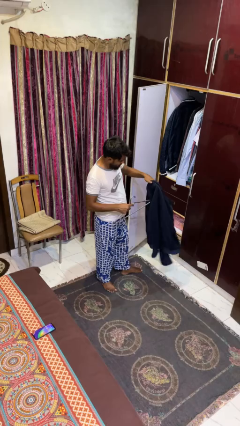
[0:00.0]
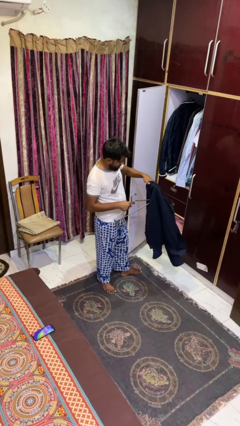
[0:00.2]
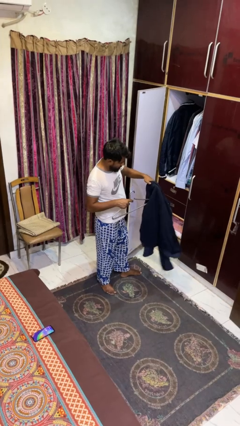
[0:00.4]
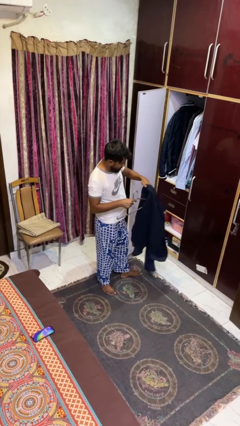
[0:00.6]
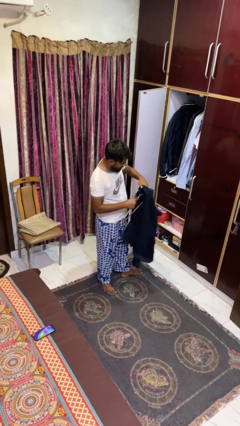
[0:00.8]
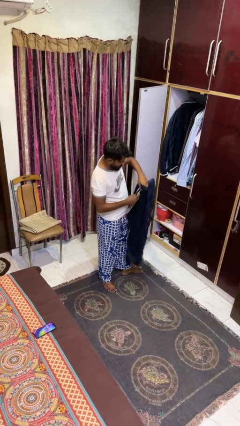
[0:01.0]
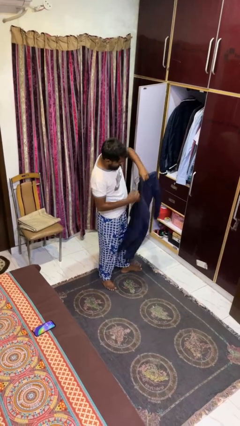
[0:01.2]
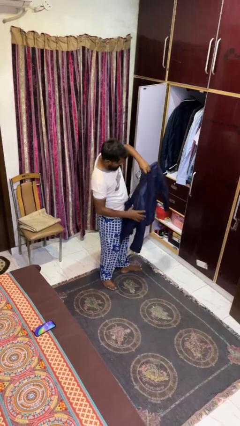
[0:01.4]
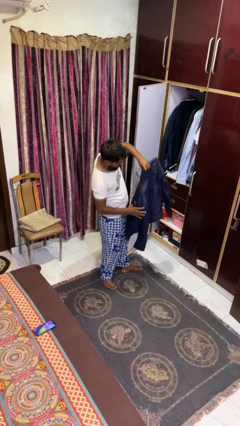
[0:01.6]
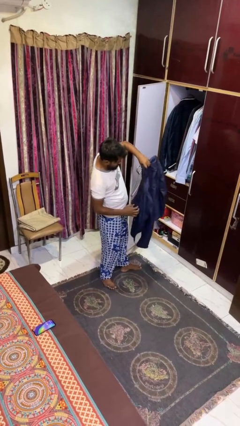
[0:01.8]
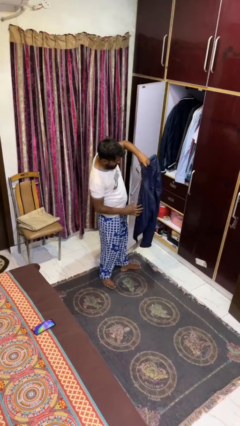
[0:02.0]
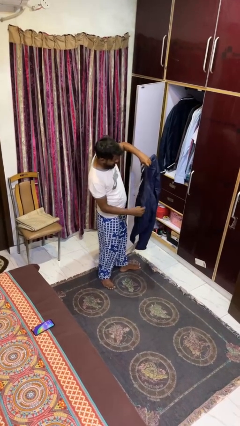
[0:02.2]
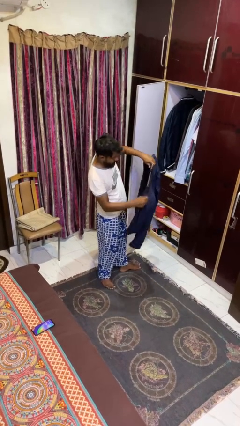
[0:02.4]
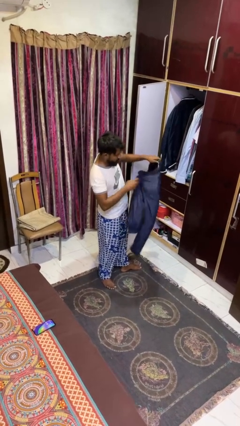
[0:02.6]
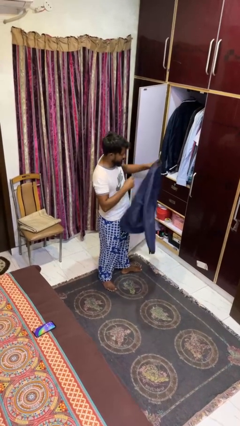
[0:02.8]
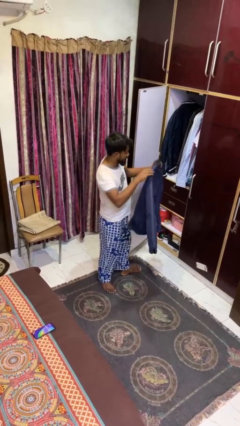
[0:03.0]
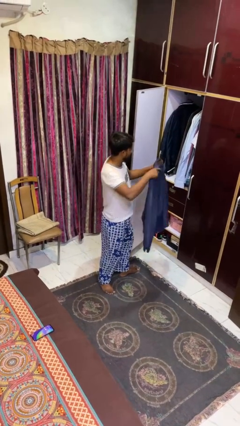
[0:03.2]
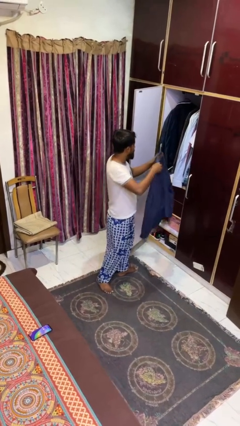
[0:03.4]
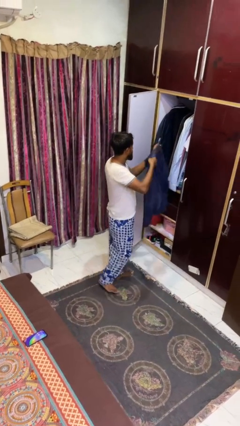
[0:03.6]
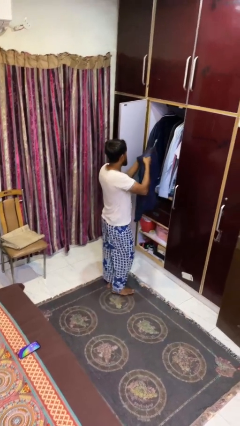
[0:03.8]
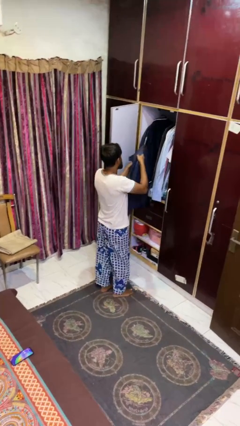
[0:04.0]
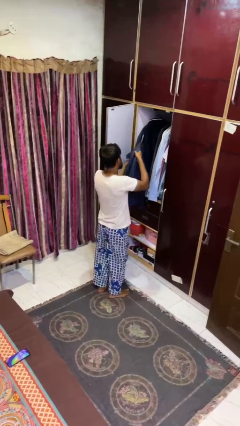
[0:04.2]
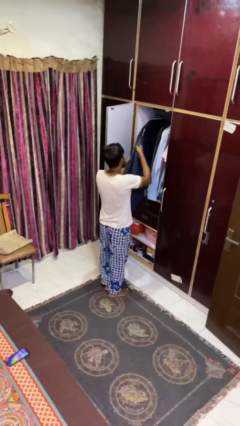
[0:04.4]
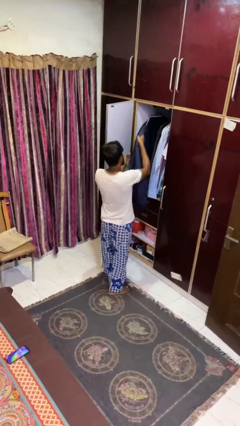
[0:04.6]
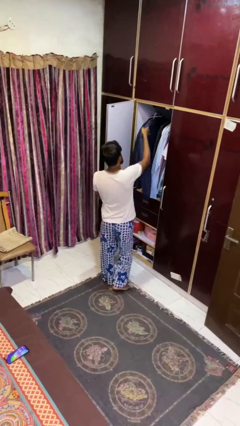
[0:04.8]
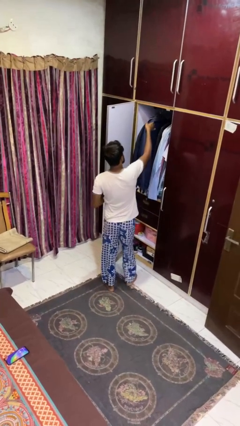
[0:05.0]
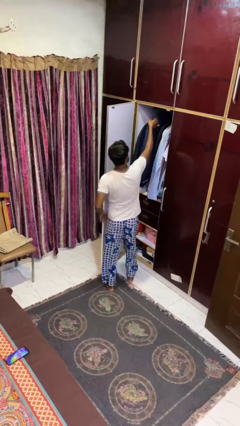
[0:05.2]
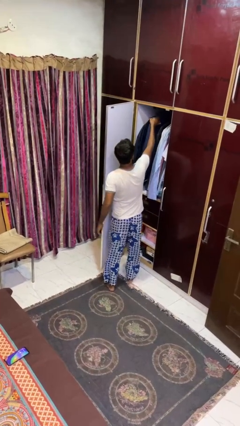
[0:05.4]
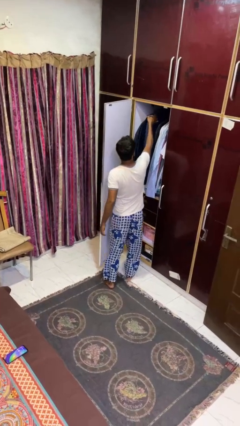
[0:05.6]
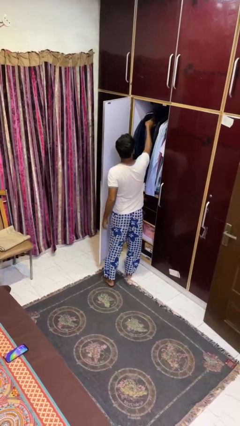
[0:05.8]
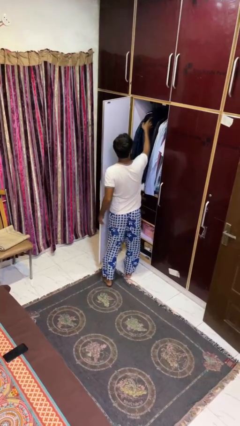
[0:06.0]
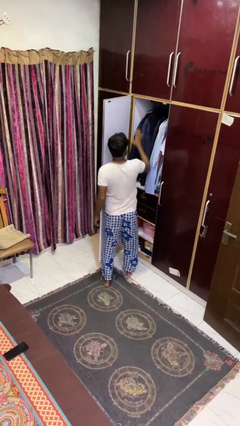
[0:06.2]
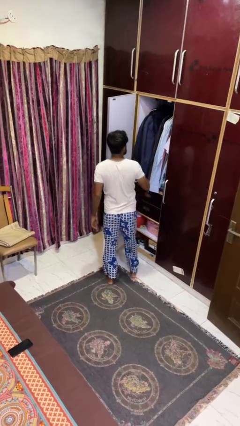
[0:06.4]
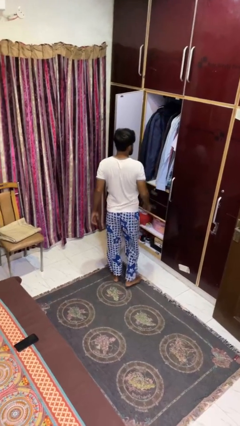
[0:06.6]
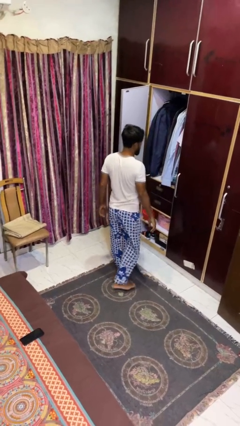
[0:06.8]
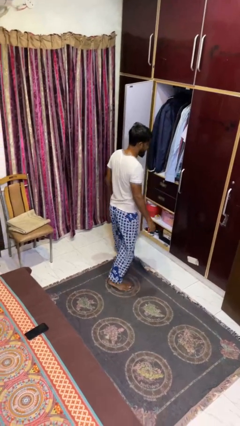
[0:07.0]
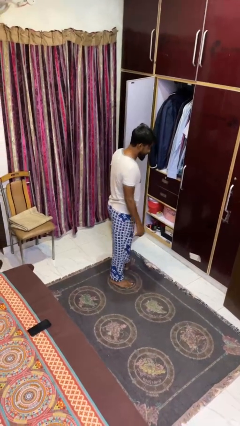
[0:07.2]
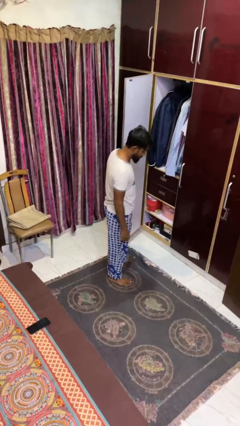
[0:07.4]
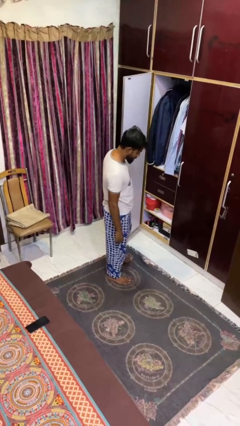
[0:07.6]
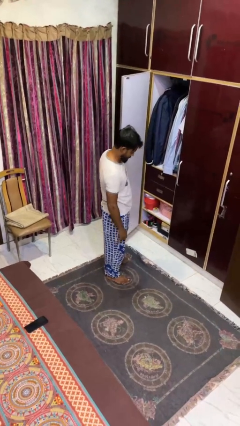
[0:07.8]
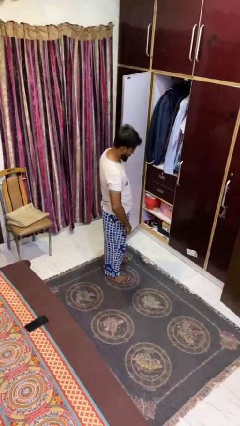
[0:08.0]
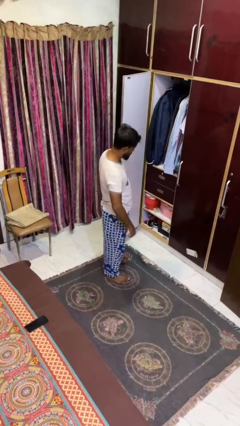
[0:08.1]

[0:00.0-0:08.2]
person puts clothes into closet

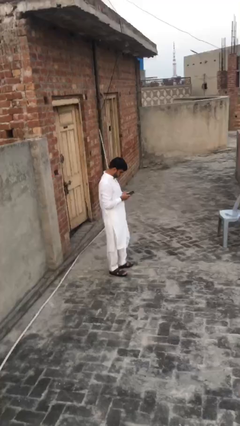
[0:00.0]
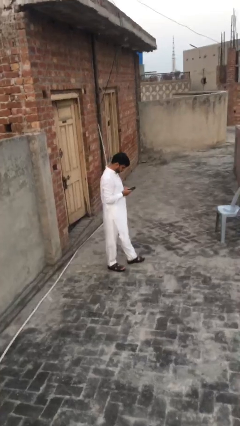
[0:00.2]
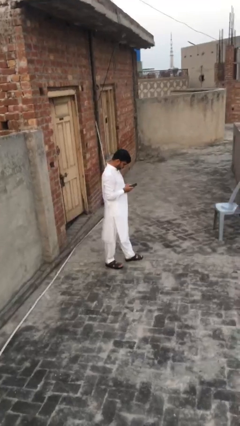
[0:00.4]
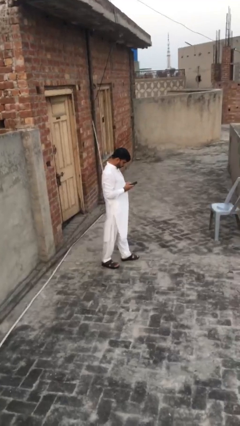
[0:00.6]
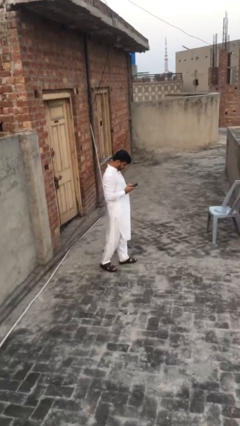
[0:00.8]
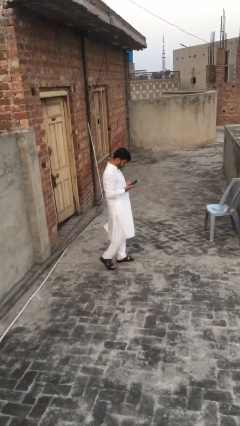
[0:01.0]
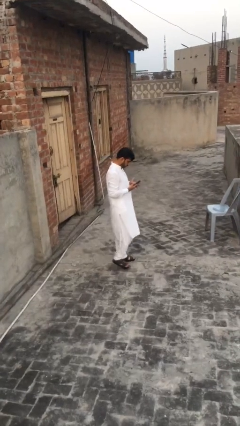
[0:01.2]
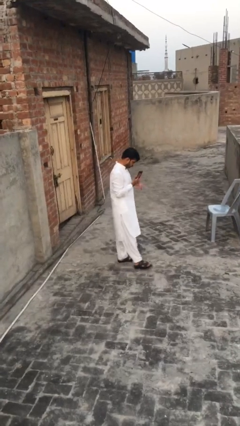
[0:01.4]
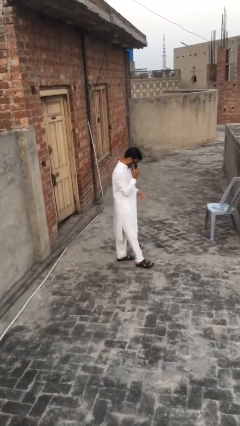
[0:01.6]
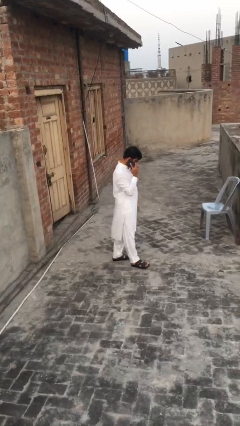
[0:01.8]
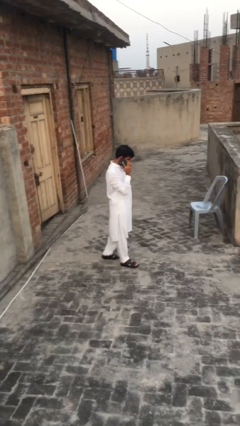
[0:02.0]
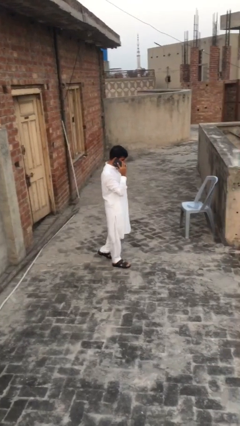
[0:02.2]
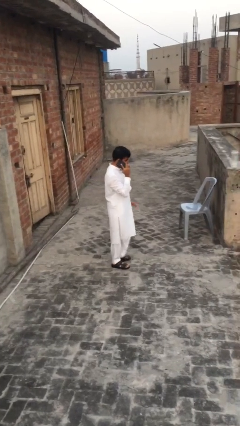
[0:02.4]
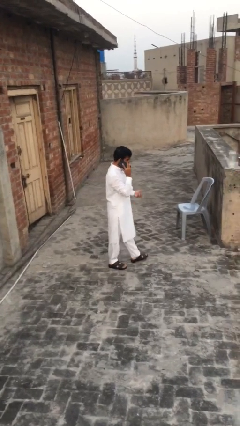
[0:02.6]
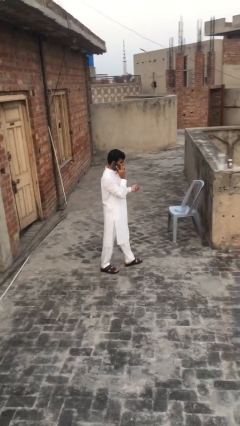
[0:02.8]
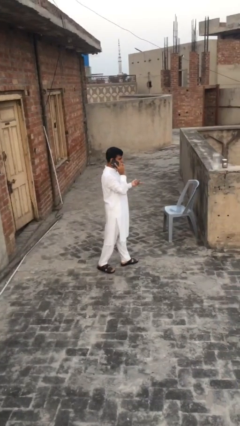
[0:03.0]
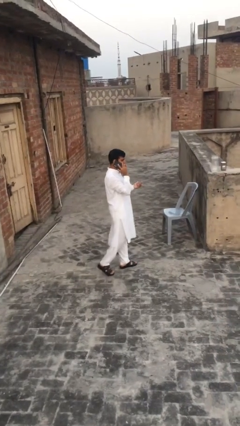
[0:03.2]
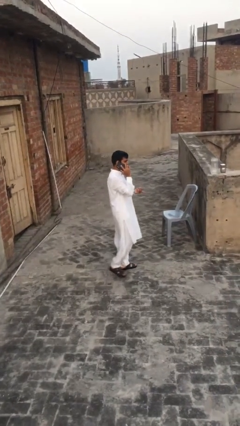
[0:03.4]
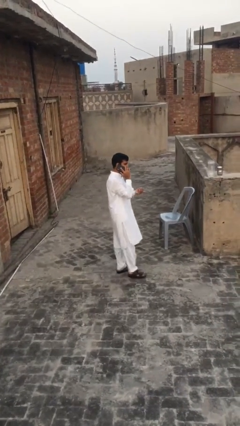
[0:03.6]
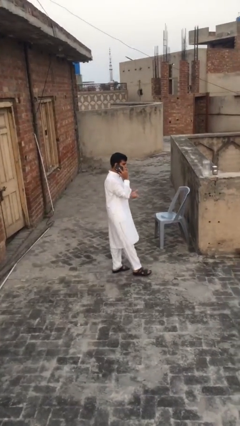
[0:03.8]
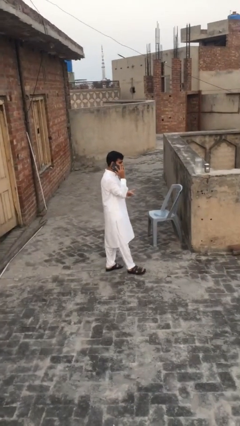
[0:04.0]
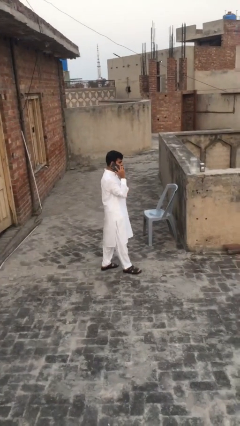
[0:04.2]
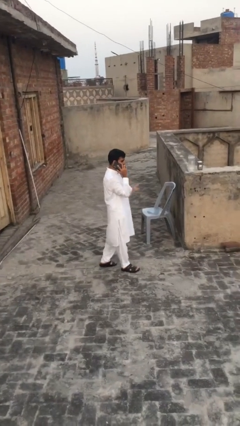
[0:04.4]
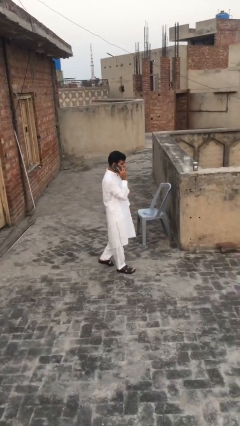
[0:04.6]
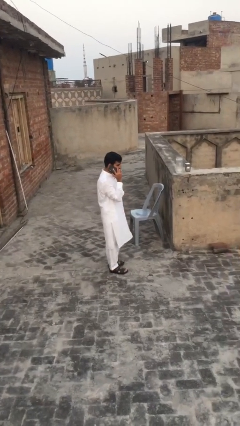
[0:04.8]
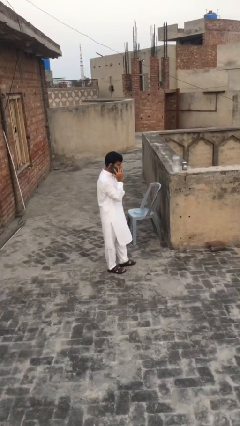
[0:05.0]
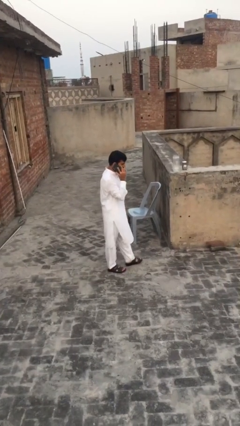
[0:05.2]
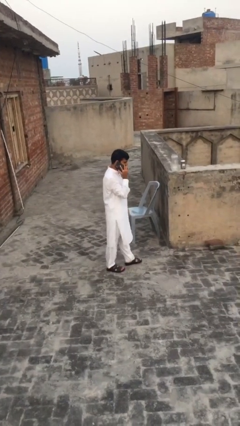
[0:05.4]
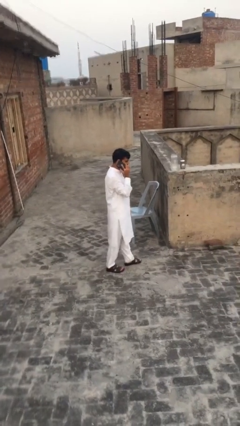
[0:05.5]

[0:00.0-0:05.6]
person talks on phone

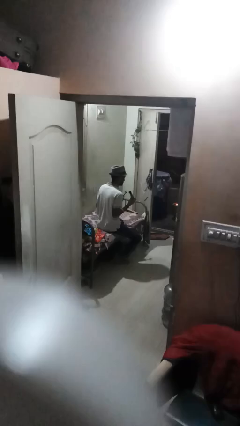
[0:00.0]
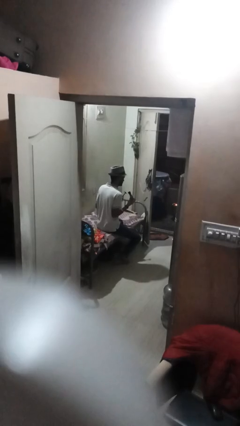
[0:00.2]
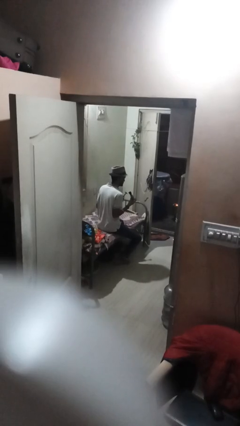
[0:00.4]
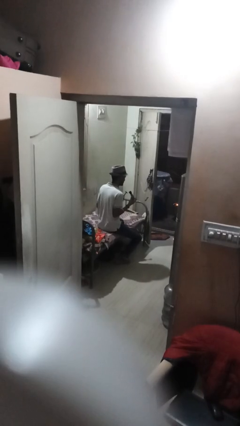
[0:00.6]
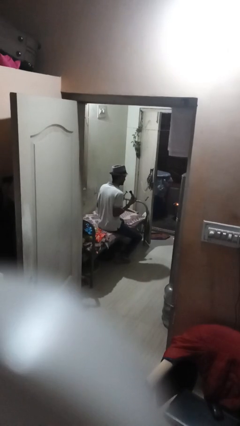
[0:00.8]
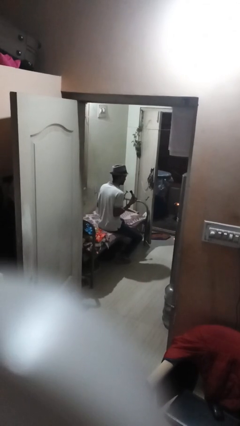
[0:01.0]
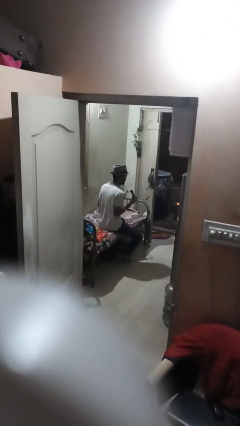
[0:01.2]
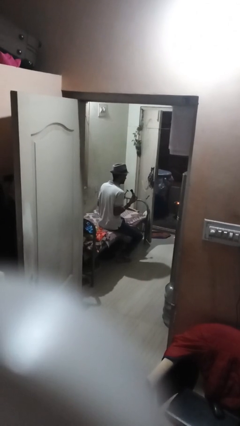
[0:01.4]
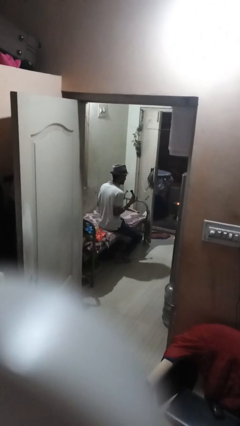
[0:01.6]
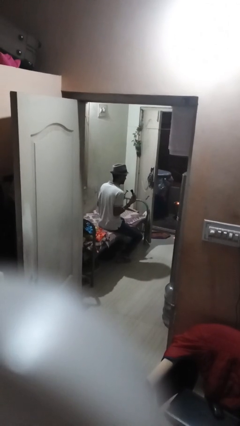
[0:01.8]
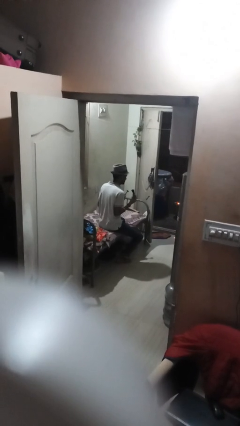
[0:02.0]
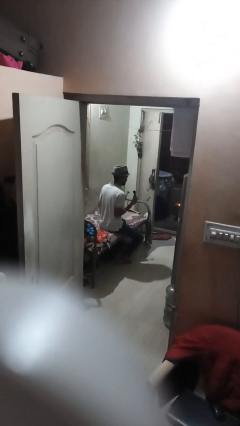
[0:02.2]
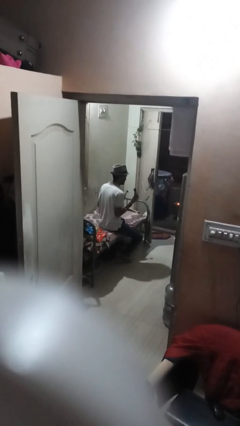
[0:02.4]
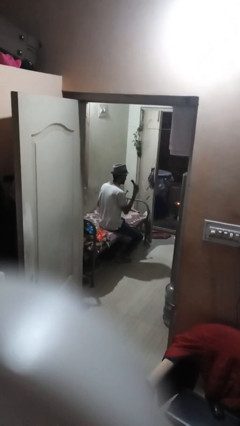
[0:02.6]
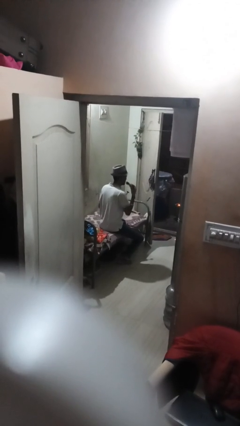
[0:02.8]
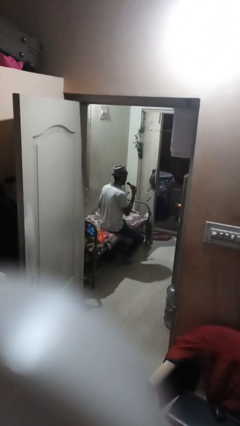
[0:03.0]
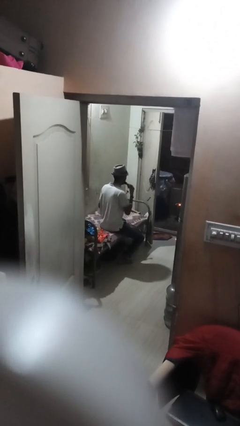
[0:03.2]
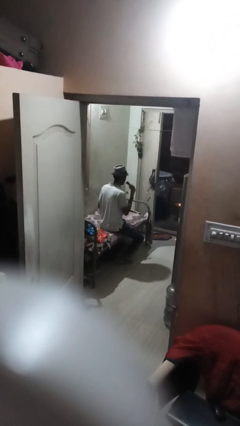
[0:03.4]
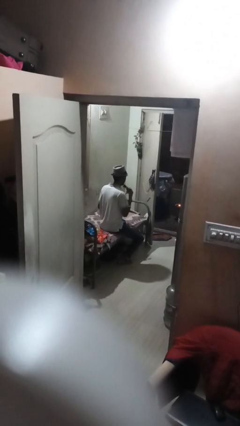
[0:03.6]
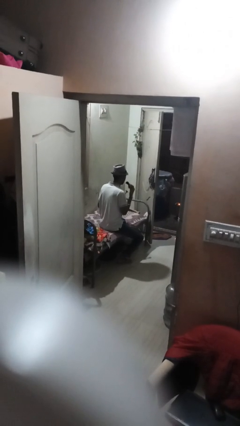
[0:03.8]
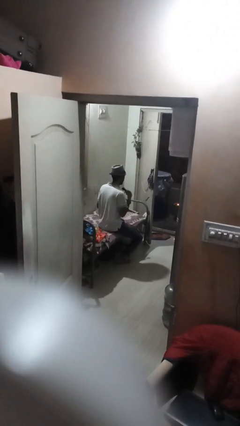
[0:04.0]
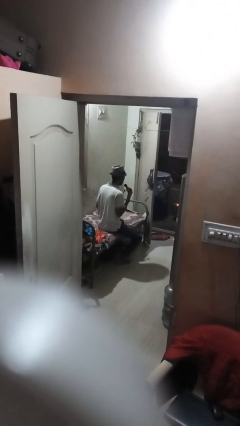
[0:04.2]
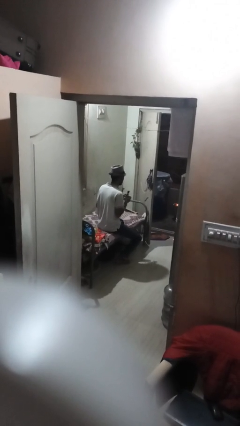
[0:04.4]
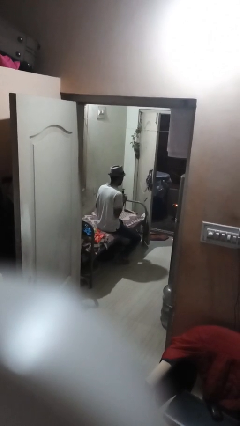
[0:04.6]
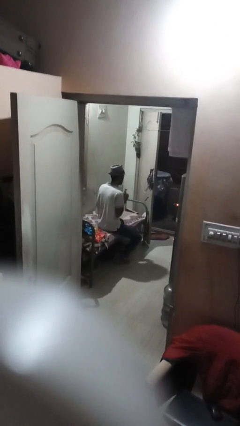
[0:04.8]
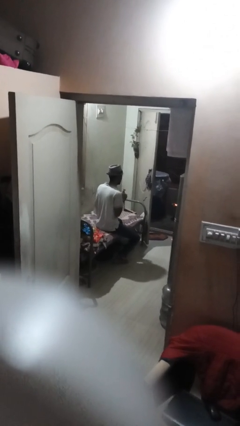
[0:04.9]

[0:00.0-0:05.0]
person applies shaving cream
